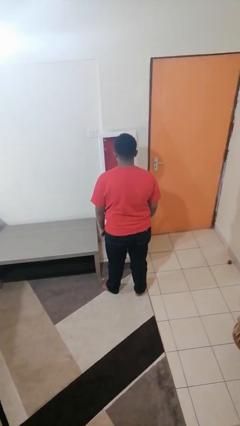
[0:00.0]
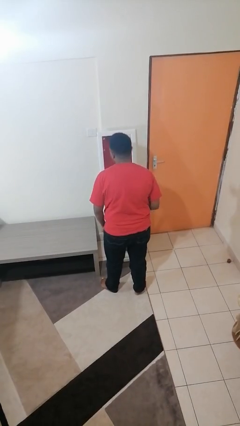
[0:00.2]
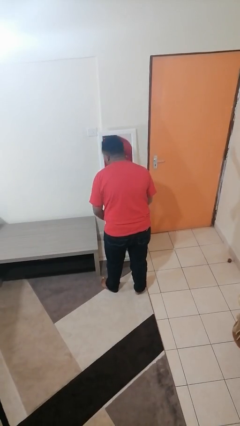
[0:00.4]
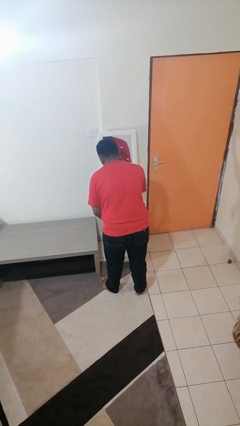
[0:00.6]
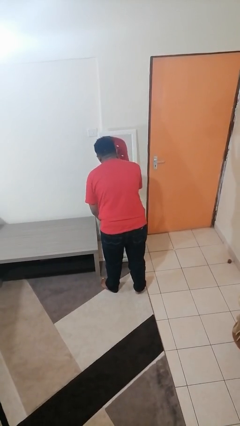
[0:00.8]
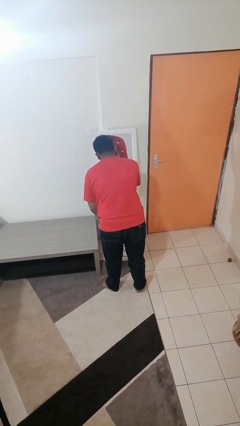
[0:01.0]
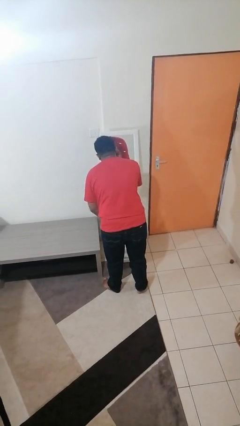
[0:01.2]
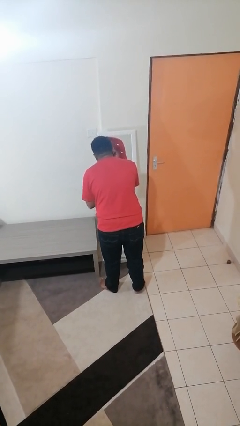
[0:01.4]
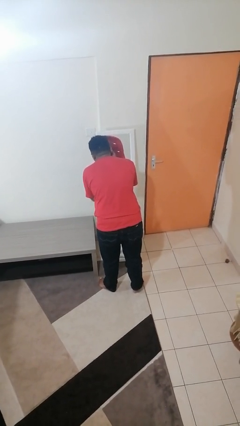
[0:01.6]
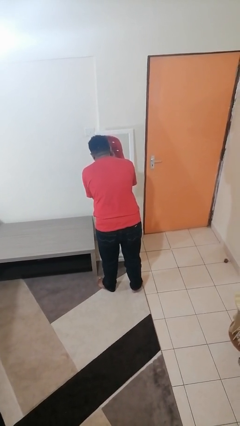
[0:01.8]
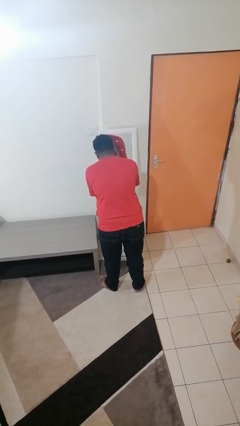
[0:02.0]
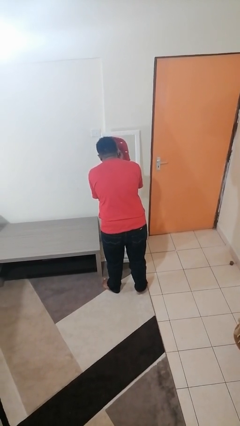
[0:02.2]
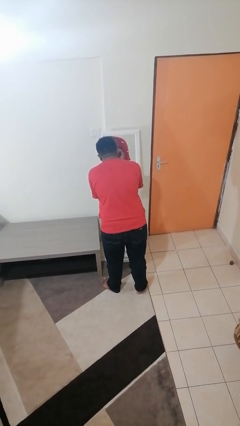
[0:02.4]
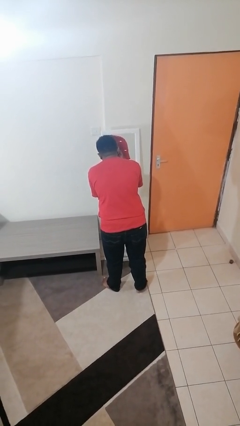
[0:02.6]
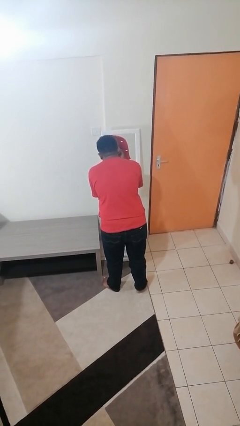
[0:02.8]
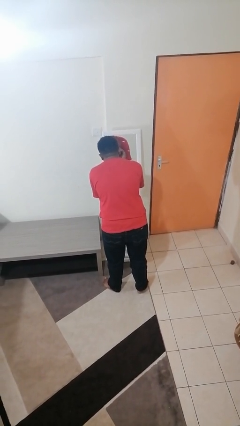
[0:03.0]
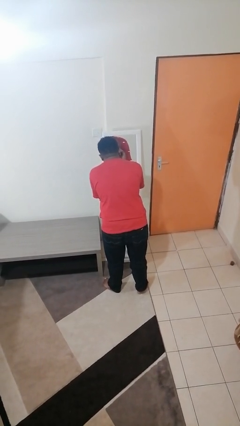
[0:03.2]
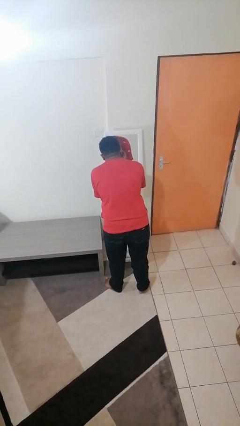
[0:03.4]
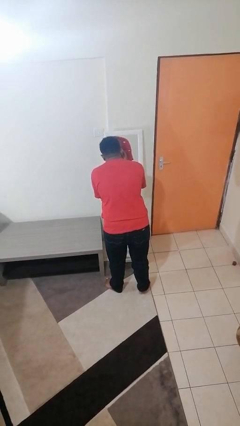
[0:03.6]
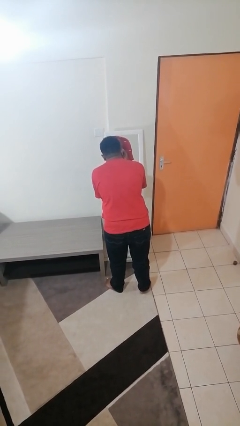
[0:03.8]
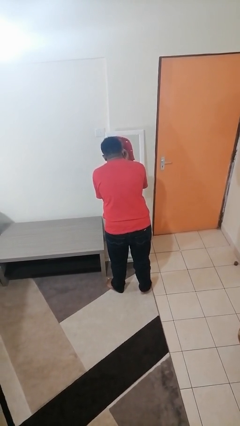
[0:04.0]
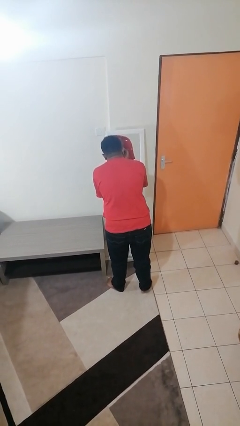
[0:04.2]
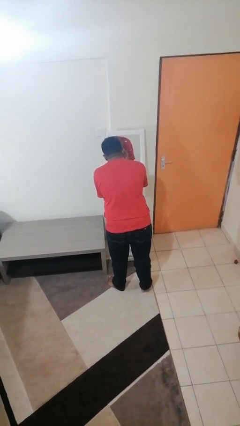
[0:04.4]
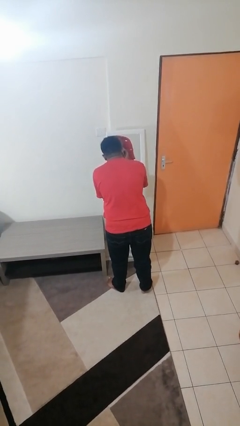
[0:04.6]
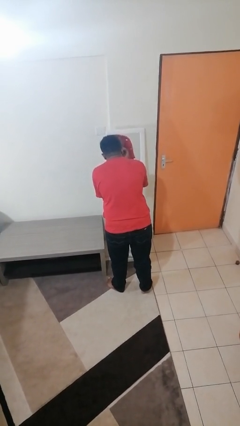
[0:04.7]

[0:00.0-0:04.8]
person applies eye makeup

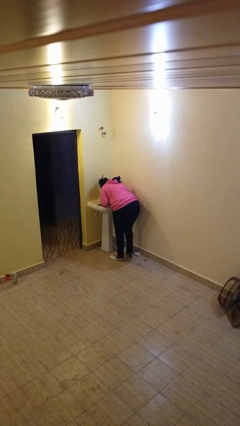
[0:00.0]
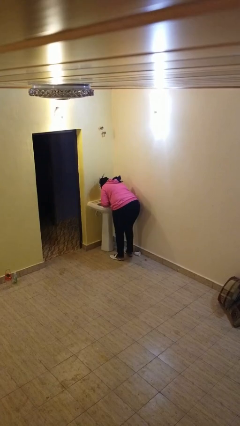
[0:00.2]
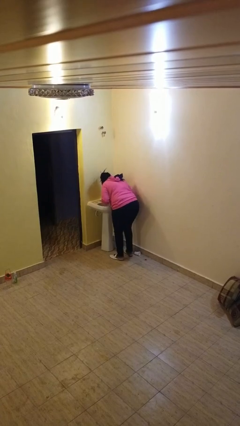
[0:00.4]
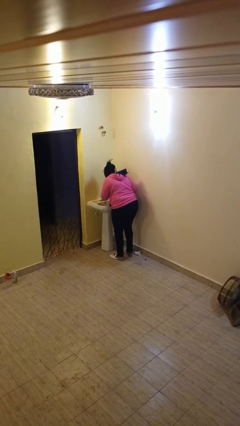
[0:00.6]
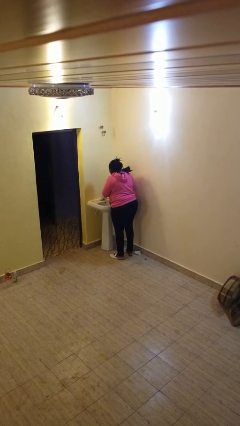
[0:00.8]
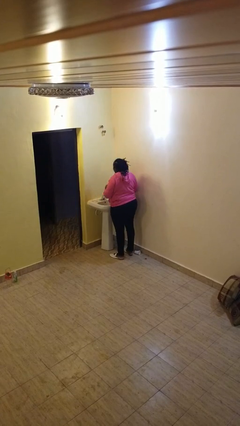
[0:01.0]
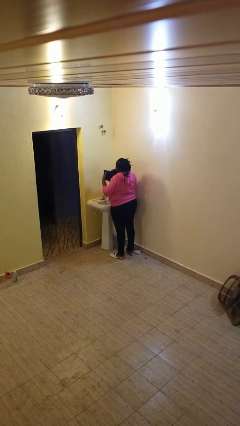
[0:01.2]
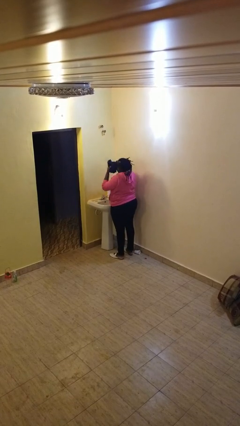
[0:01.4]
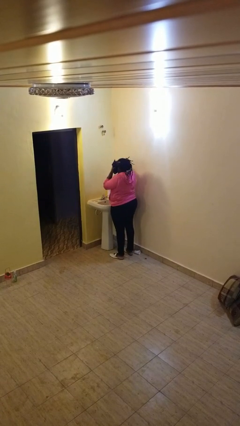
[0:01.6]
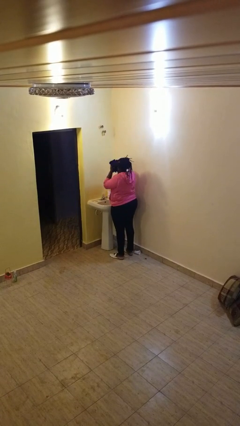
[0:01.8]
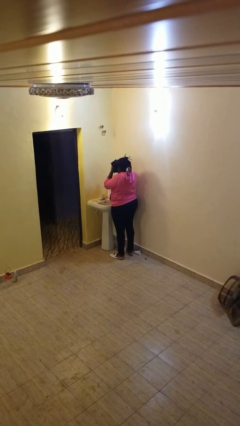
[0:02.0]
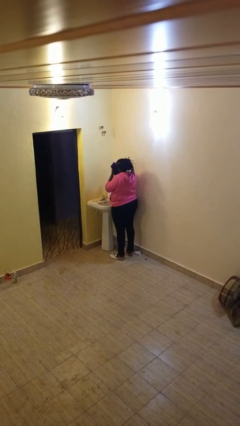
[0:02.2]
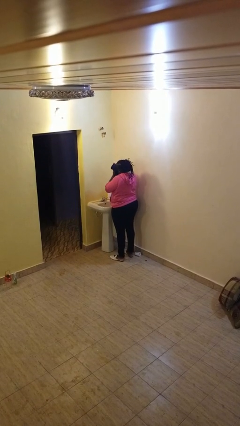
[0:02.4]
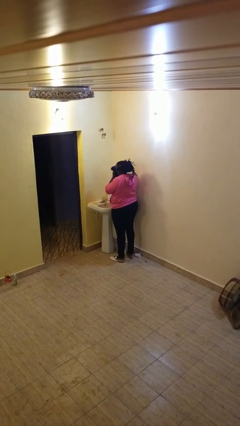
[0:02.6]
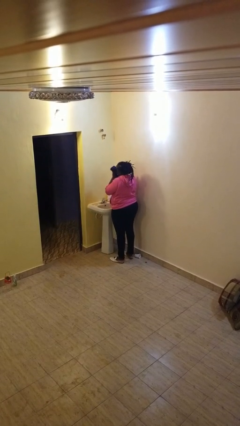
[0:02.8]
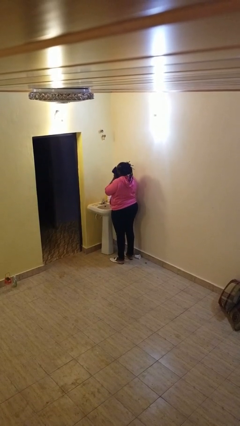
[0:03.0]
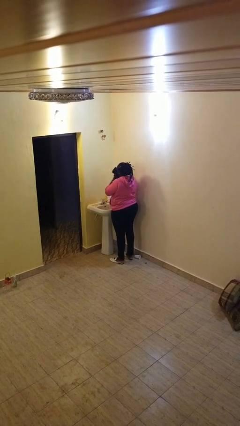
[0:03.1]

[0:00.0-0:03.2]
person dries face with towel

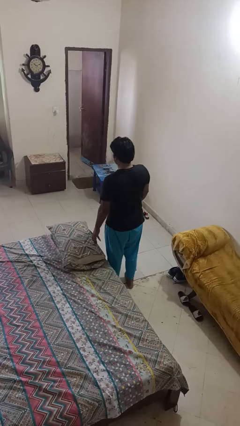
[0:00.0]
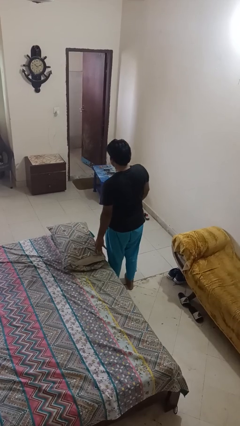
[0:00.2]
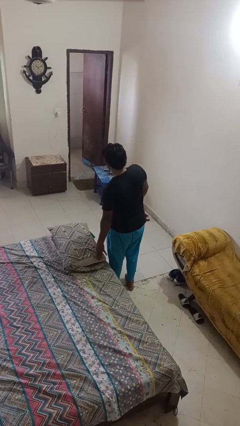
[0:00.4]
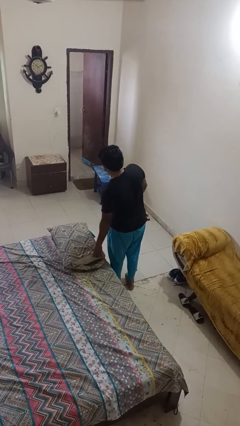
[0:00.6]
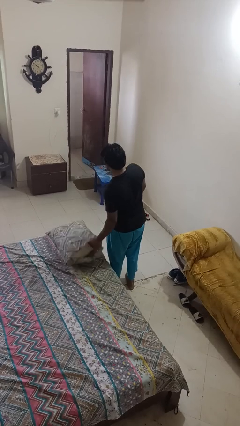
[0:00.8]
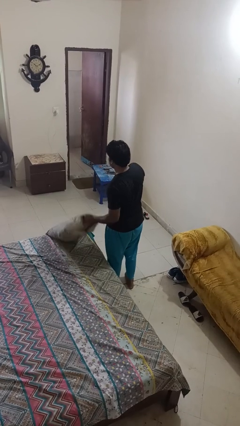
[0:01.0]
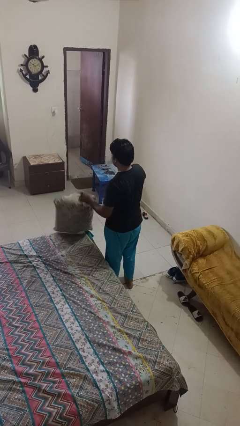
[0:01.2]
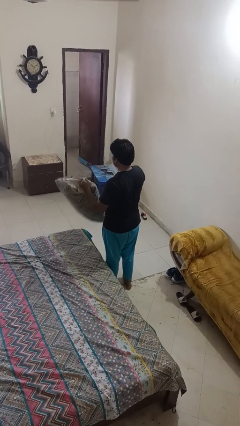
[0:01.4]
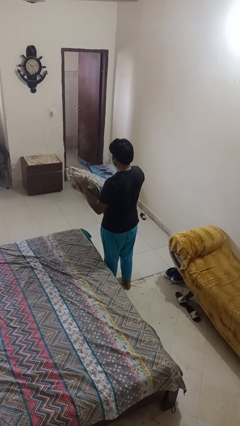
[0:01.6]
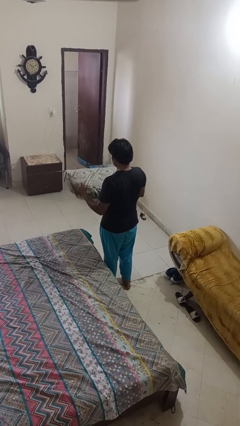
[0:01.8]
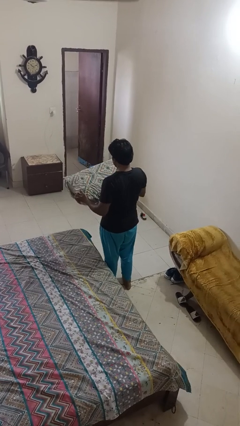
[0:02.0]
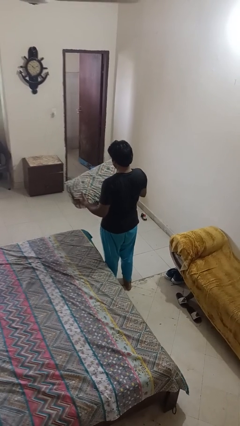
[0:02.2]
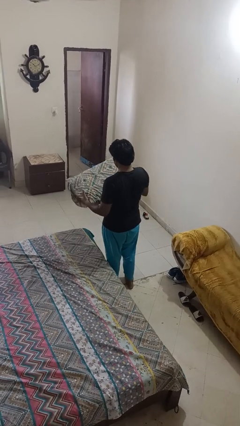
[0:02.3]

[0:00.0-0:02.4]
person picks up object from bed

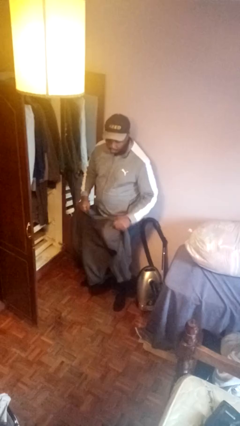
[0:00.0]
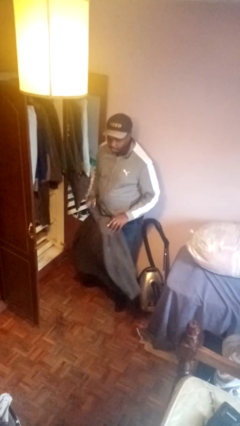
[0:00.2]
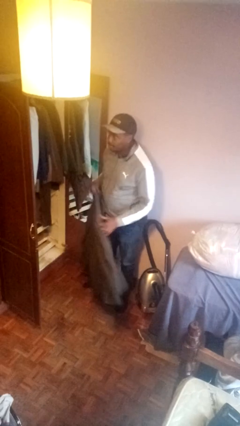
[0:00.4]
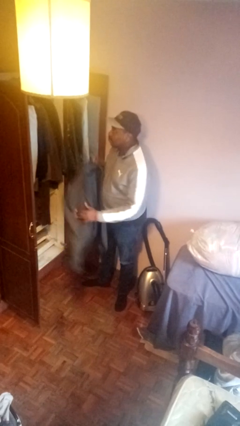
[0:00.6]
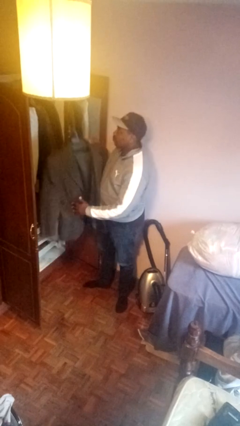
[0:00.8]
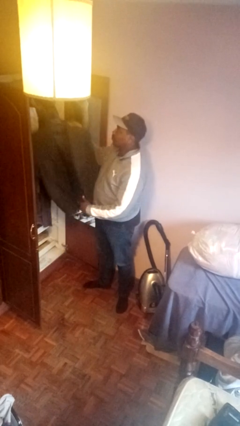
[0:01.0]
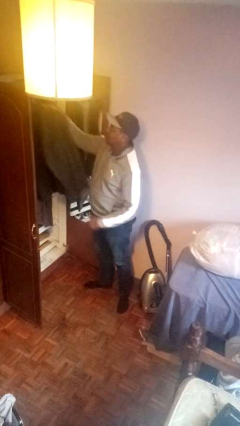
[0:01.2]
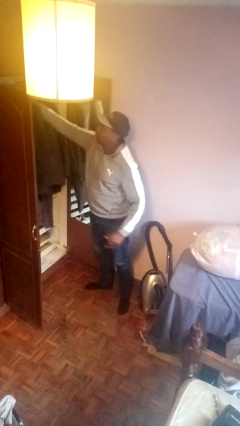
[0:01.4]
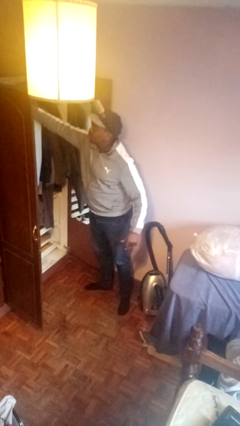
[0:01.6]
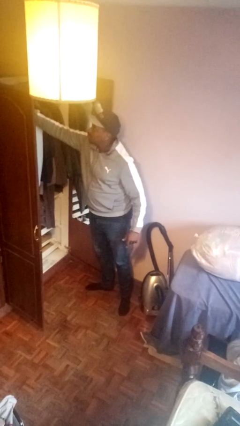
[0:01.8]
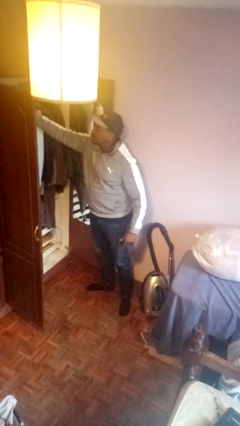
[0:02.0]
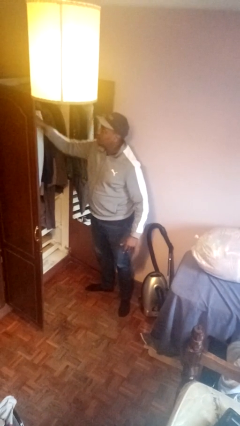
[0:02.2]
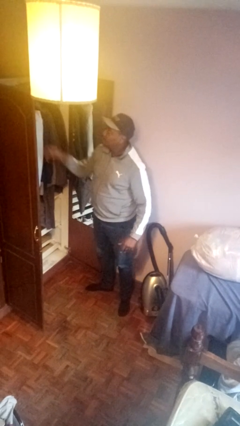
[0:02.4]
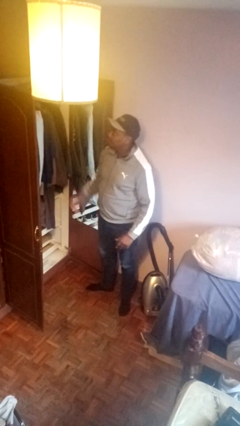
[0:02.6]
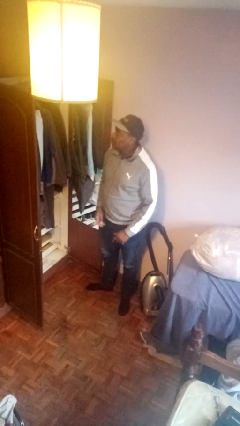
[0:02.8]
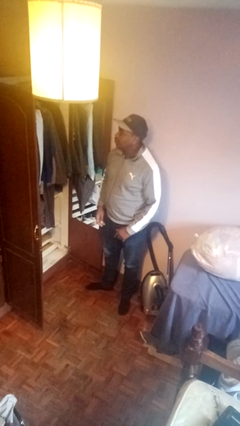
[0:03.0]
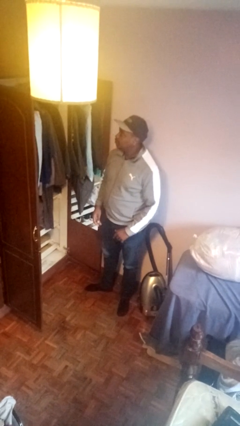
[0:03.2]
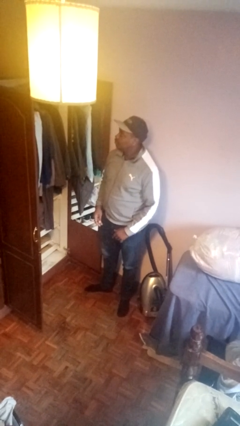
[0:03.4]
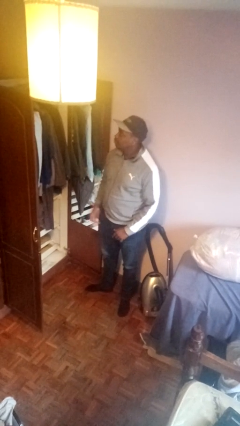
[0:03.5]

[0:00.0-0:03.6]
person puts clothes into closet

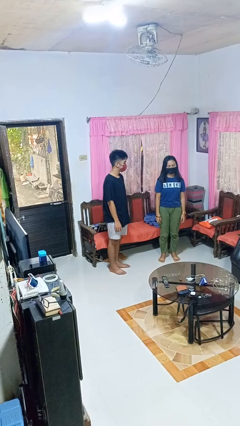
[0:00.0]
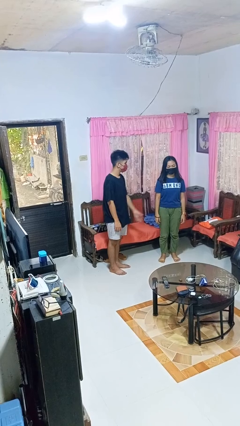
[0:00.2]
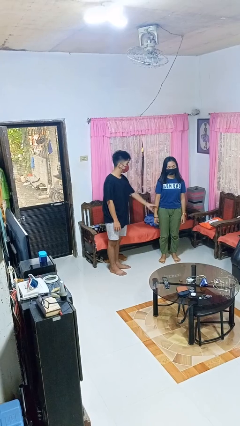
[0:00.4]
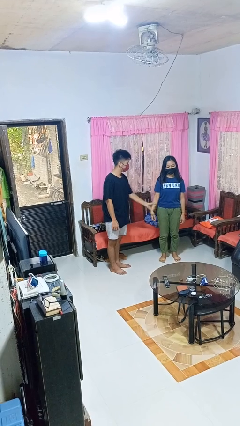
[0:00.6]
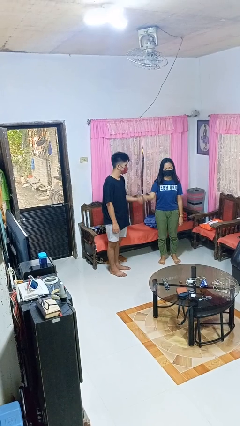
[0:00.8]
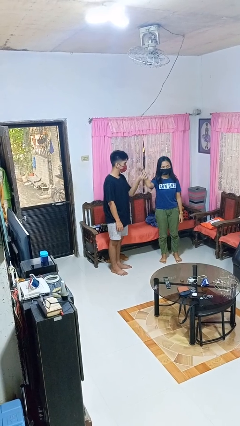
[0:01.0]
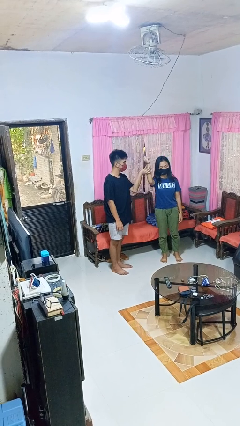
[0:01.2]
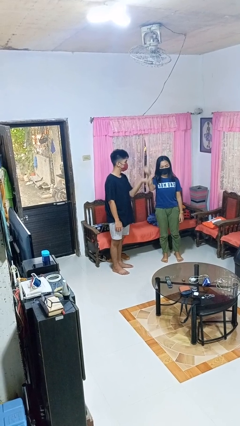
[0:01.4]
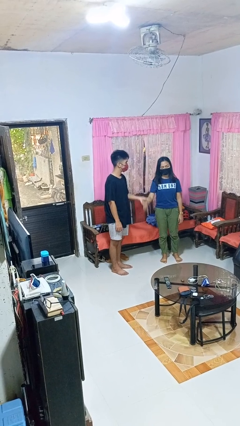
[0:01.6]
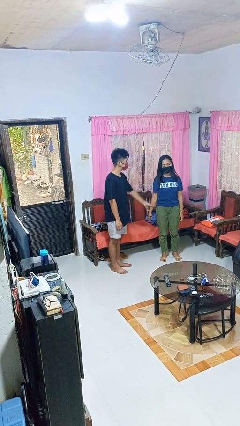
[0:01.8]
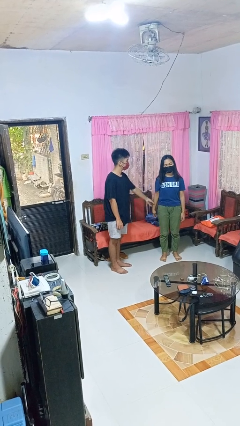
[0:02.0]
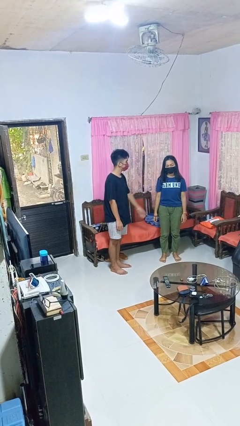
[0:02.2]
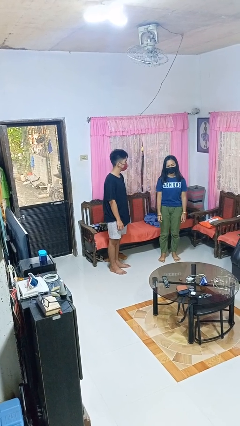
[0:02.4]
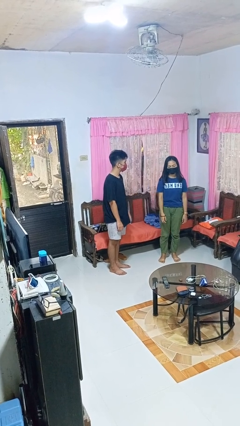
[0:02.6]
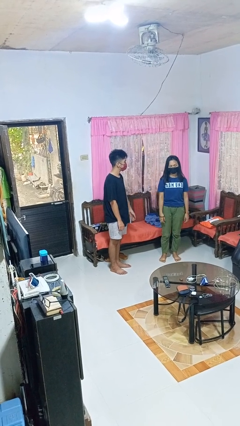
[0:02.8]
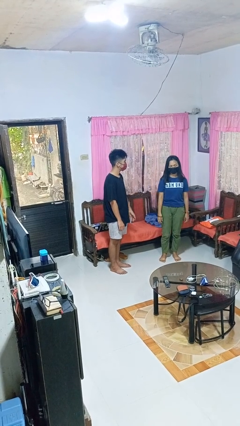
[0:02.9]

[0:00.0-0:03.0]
person grabs person by forearm

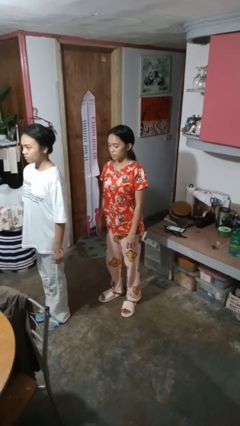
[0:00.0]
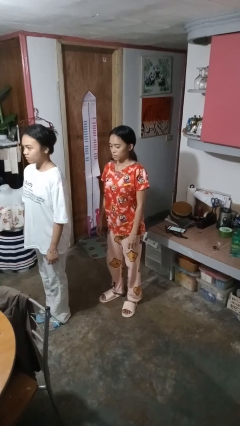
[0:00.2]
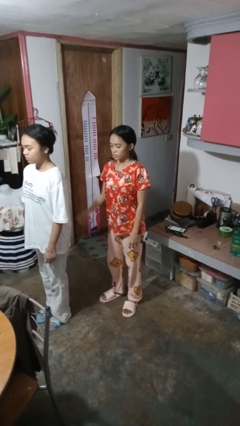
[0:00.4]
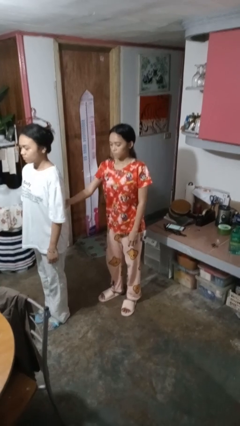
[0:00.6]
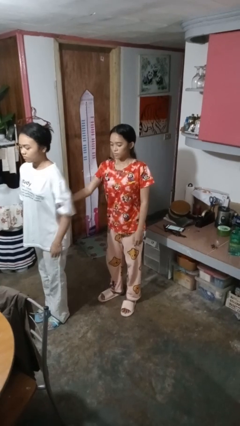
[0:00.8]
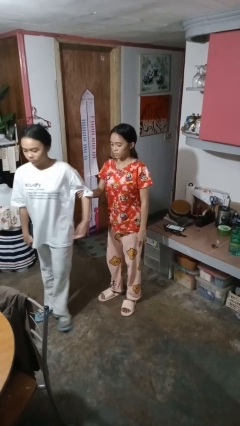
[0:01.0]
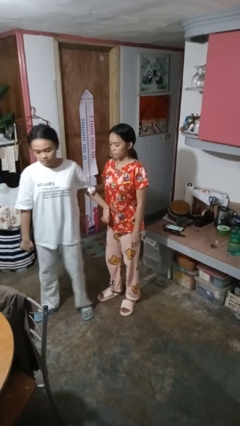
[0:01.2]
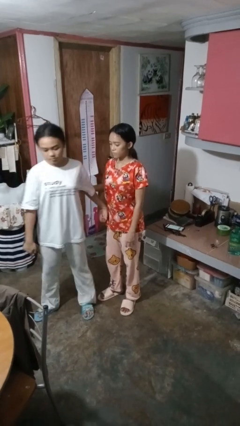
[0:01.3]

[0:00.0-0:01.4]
person grabs person by bicep
